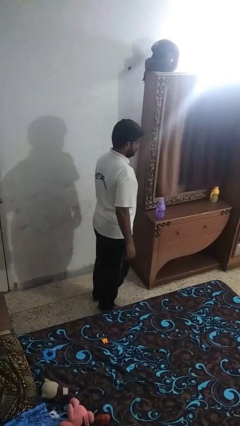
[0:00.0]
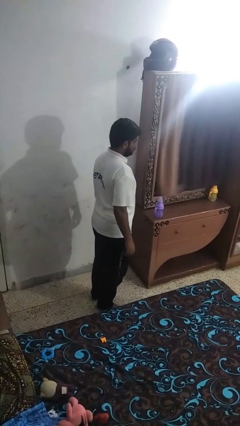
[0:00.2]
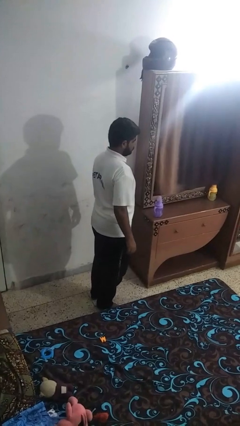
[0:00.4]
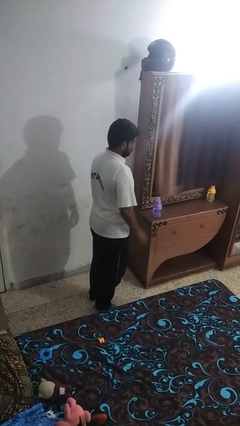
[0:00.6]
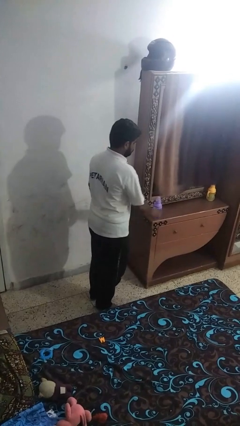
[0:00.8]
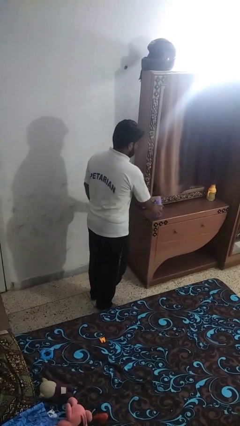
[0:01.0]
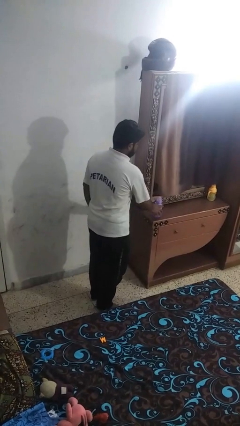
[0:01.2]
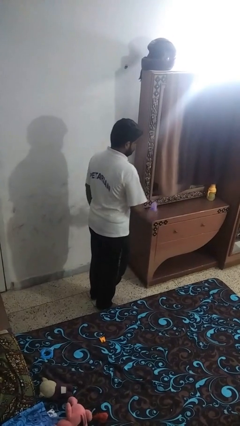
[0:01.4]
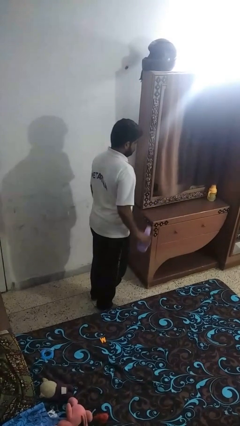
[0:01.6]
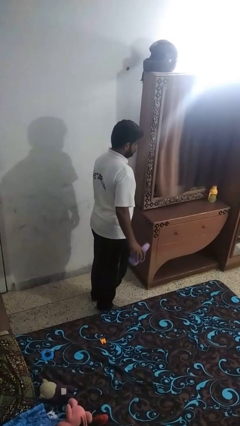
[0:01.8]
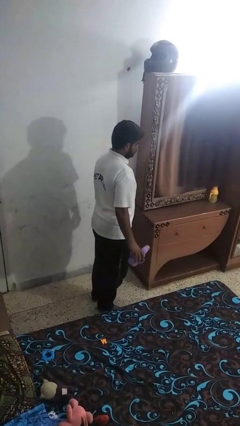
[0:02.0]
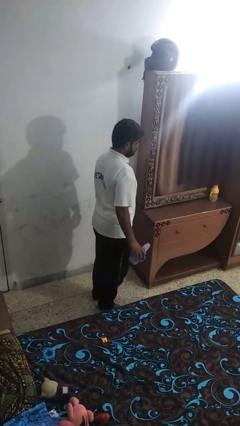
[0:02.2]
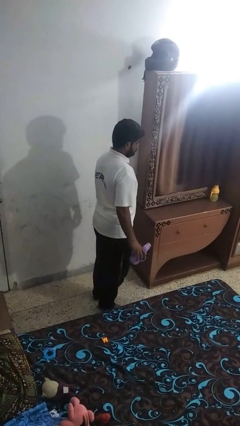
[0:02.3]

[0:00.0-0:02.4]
person picks up object from countertop

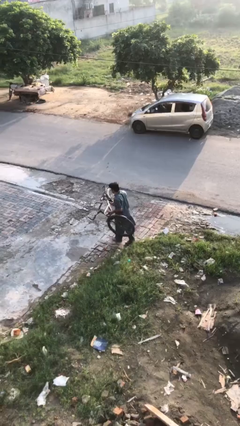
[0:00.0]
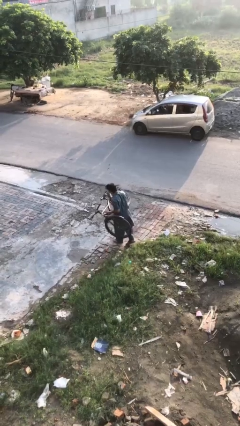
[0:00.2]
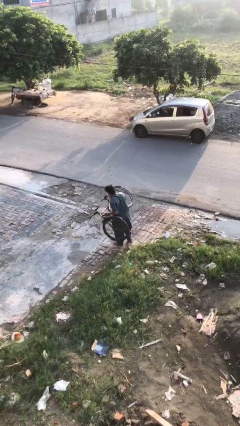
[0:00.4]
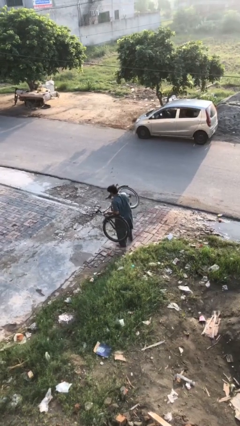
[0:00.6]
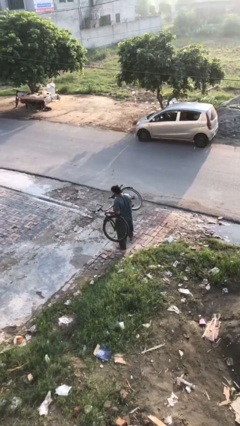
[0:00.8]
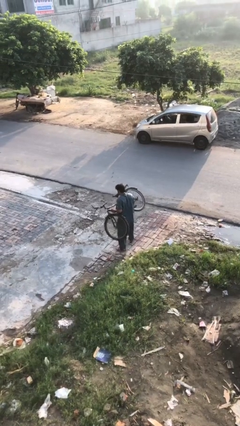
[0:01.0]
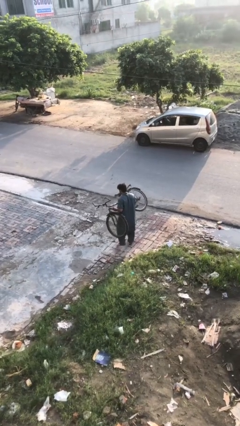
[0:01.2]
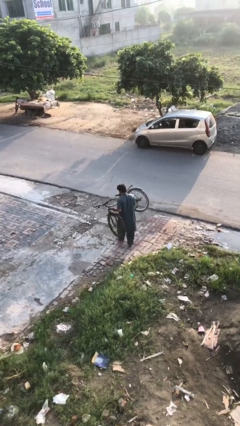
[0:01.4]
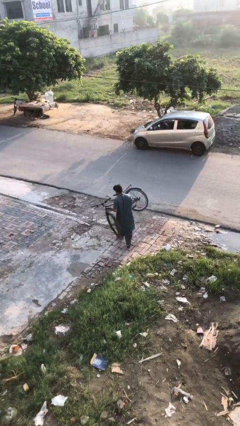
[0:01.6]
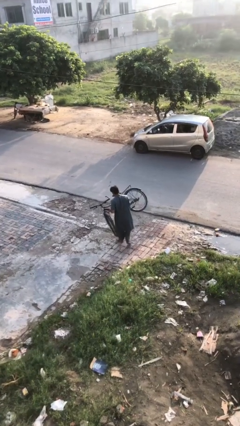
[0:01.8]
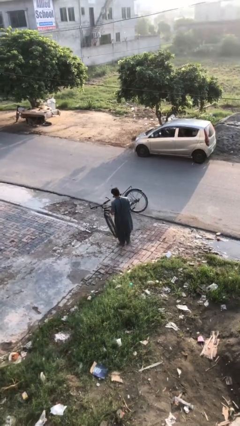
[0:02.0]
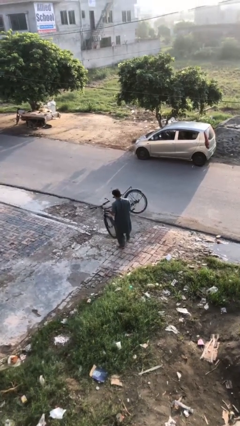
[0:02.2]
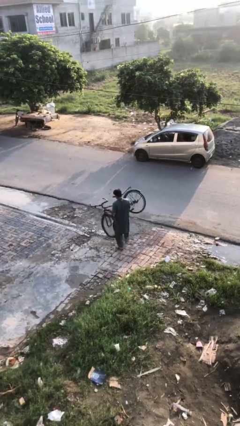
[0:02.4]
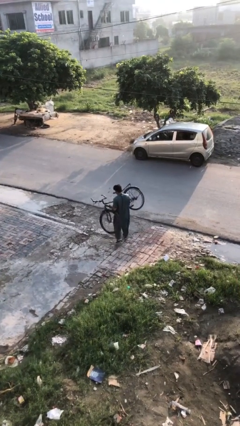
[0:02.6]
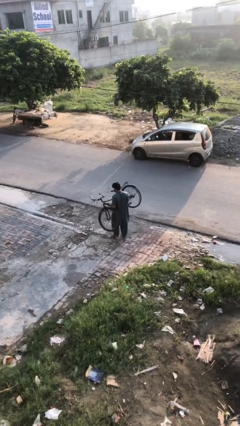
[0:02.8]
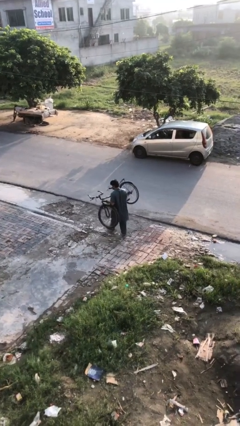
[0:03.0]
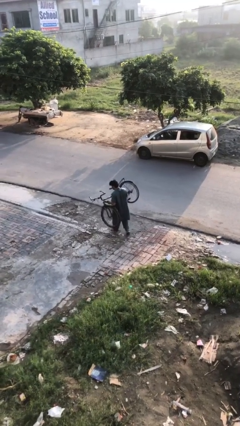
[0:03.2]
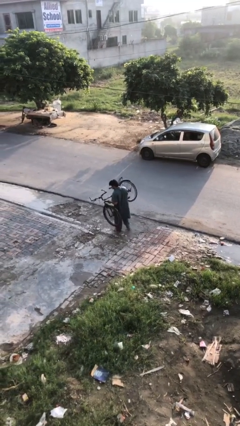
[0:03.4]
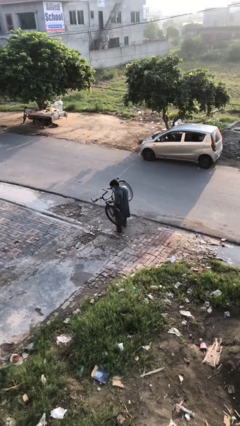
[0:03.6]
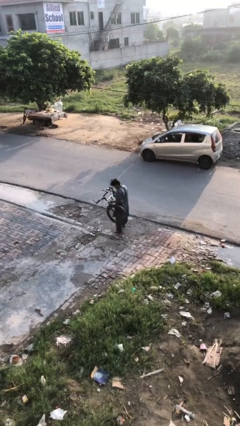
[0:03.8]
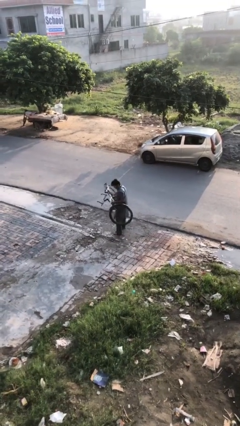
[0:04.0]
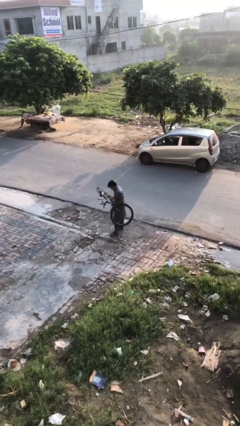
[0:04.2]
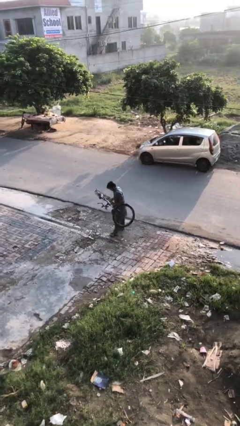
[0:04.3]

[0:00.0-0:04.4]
person carries heavy object

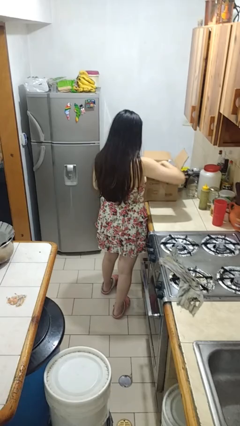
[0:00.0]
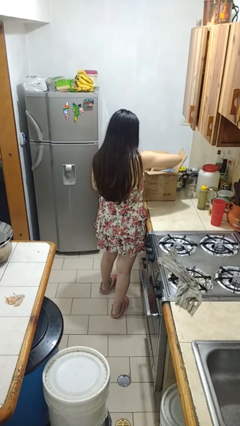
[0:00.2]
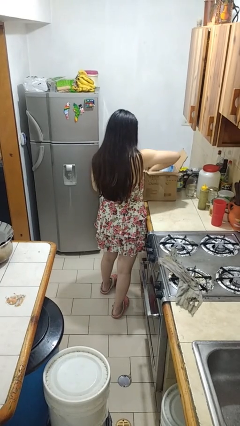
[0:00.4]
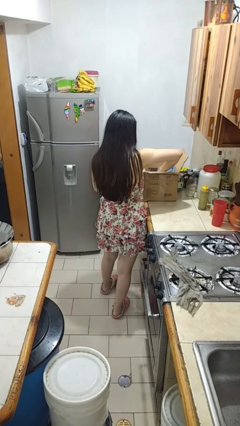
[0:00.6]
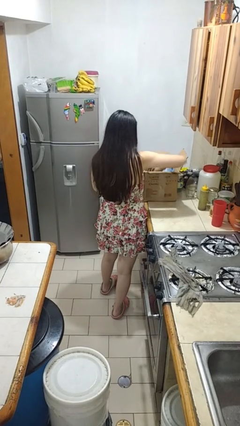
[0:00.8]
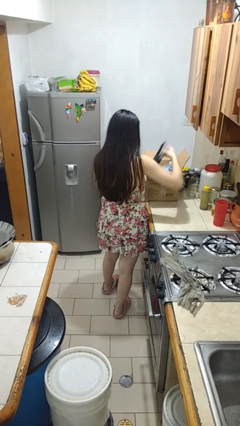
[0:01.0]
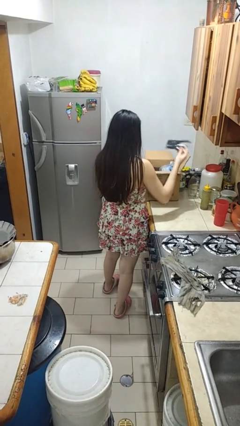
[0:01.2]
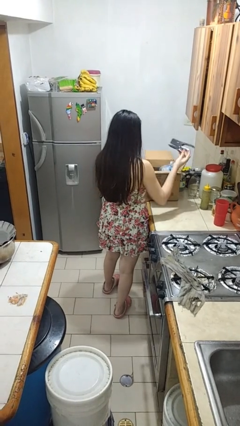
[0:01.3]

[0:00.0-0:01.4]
person takes object from box

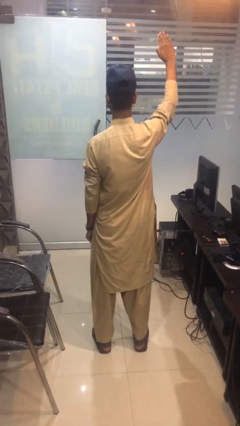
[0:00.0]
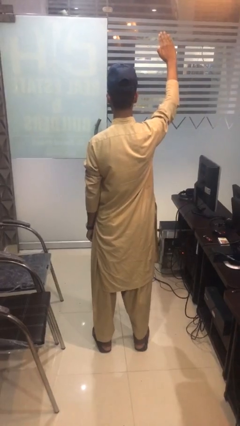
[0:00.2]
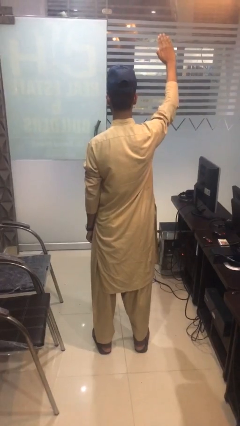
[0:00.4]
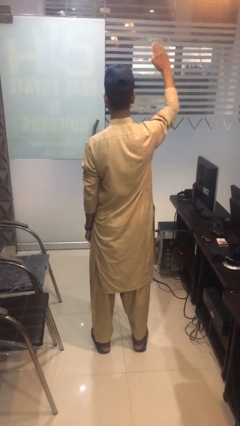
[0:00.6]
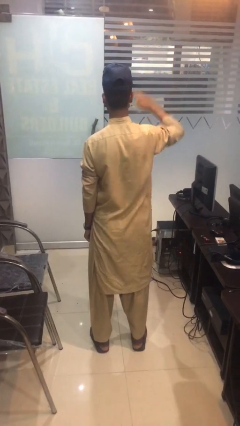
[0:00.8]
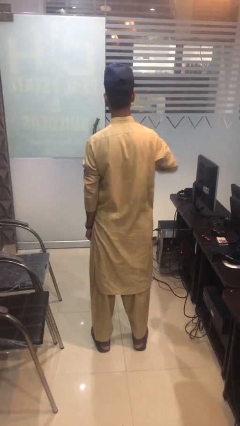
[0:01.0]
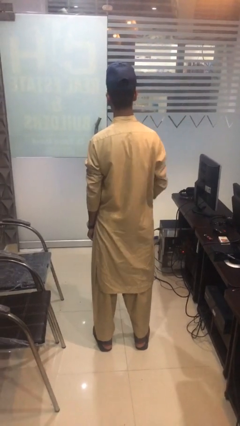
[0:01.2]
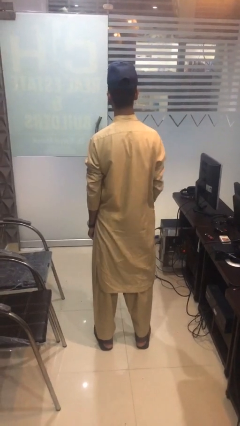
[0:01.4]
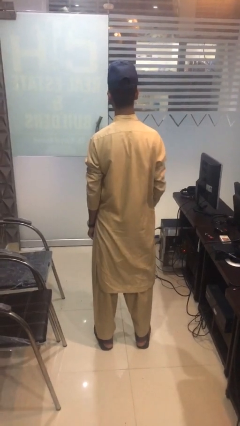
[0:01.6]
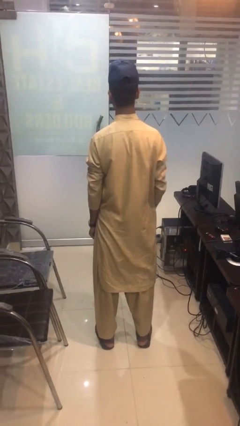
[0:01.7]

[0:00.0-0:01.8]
person gestures swipe down

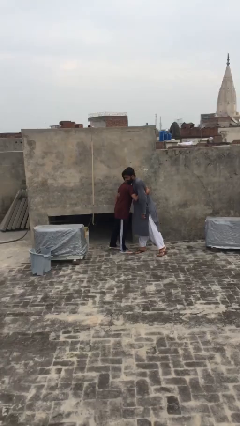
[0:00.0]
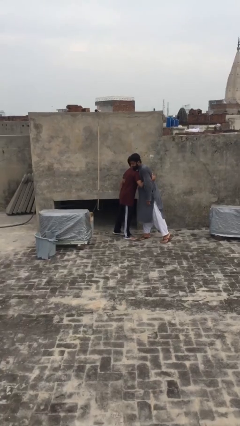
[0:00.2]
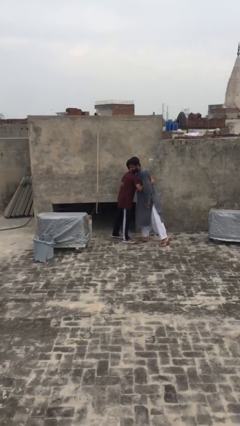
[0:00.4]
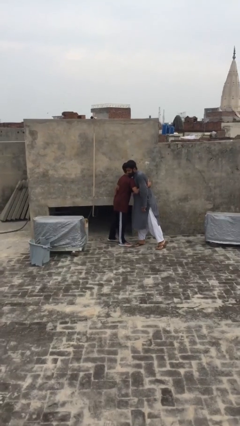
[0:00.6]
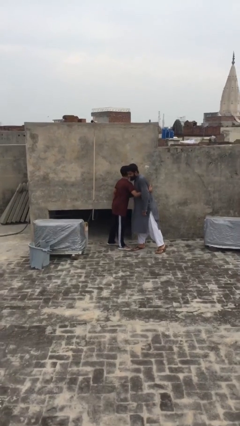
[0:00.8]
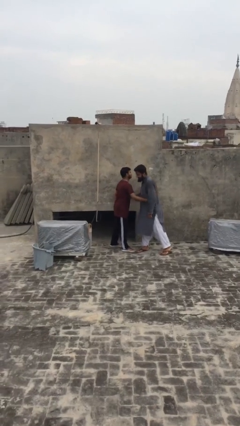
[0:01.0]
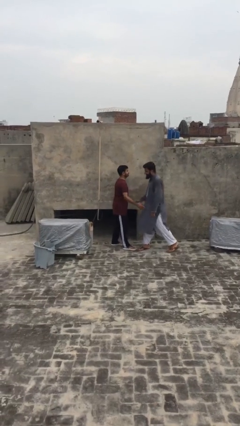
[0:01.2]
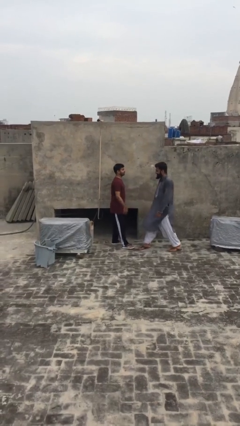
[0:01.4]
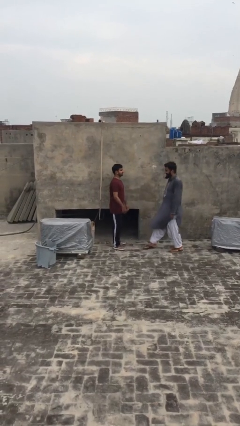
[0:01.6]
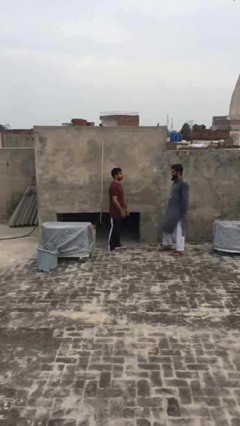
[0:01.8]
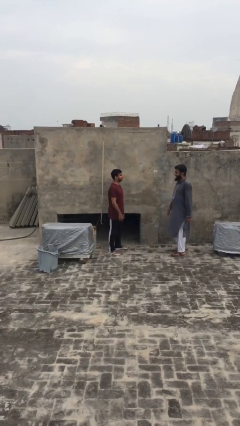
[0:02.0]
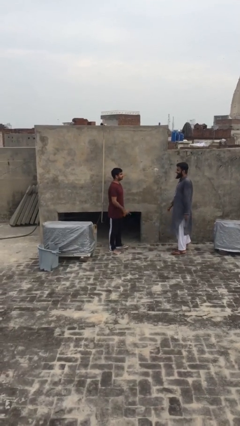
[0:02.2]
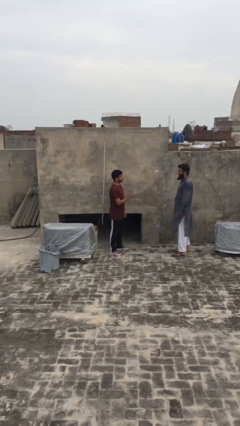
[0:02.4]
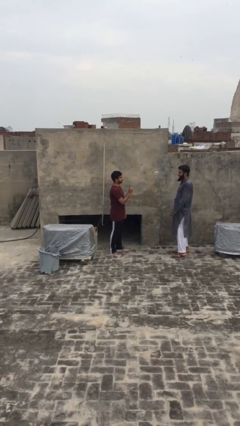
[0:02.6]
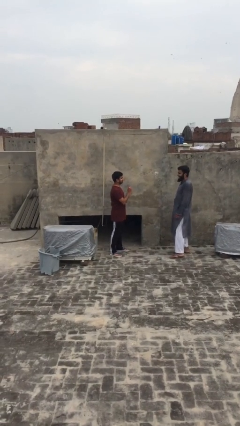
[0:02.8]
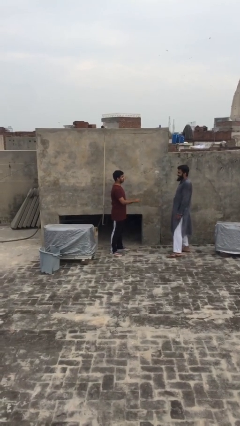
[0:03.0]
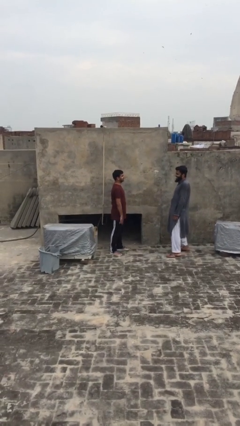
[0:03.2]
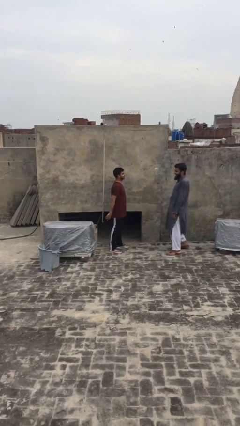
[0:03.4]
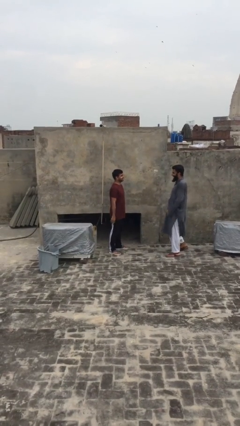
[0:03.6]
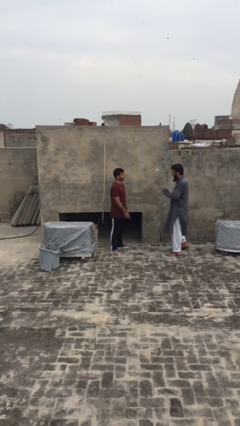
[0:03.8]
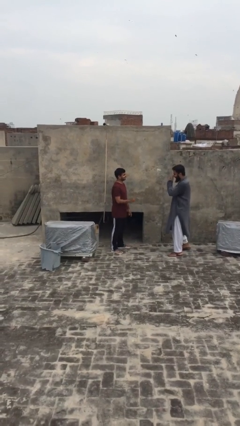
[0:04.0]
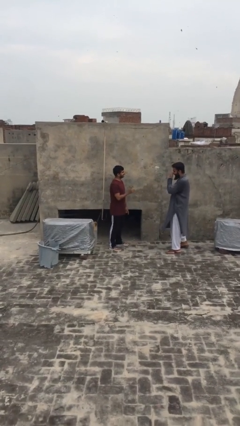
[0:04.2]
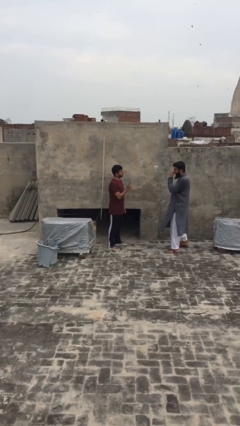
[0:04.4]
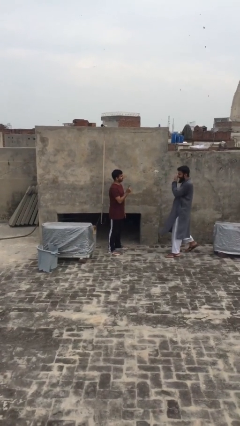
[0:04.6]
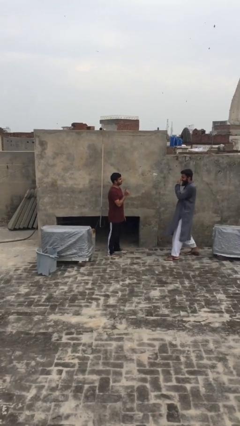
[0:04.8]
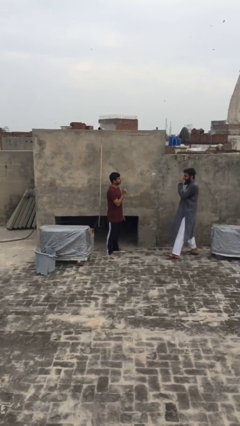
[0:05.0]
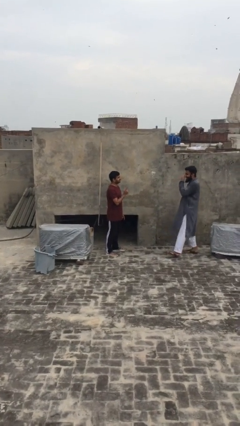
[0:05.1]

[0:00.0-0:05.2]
person talks to person

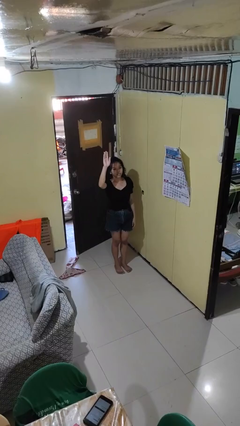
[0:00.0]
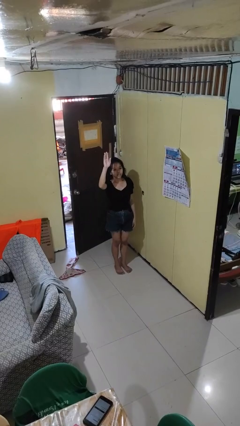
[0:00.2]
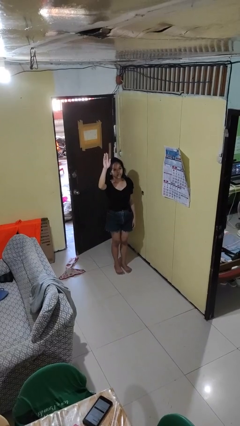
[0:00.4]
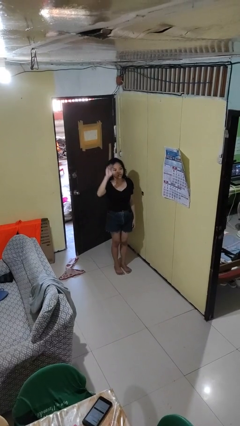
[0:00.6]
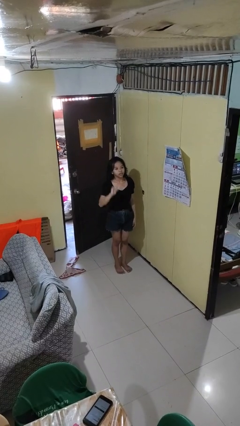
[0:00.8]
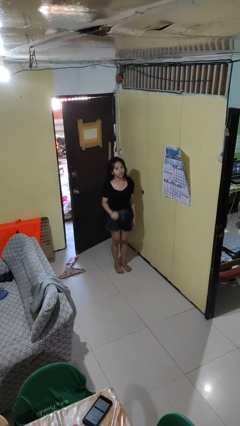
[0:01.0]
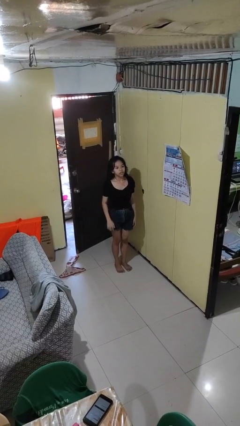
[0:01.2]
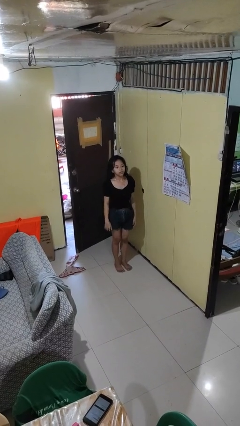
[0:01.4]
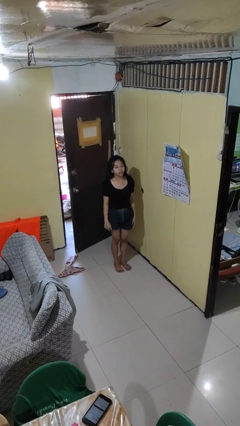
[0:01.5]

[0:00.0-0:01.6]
person gestures lower hand

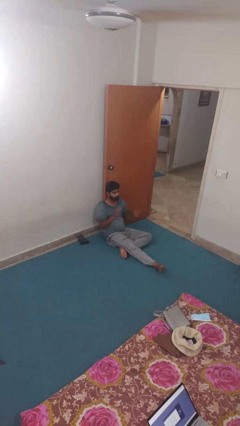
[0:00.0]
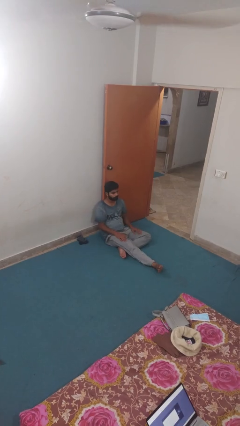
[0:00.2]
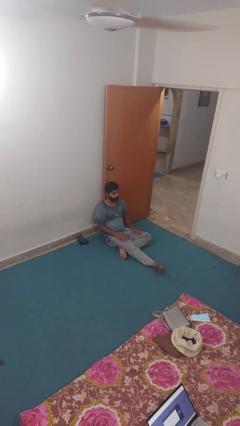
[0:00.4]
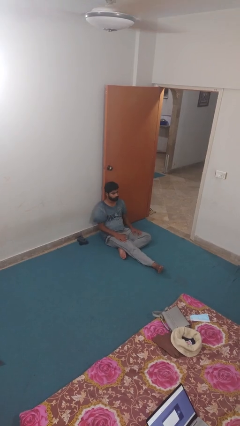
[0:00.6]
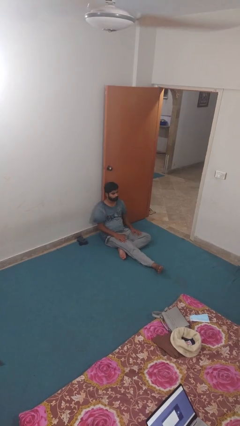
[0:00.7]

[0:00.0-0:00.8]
person slaps hands on thighs
